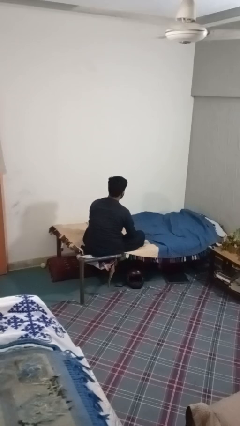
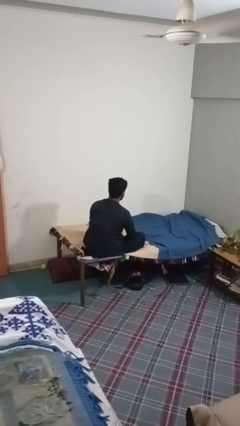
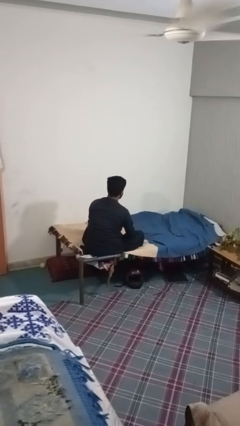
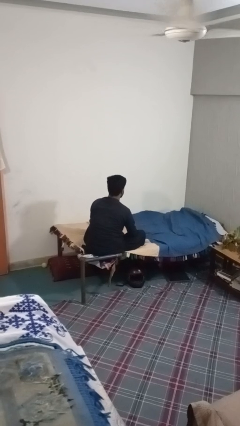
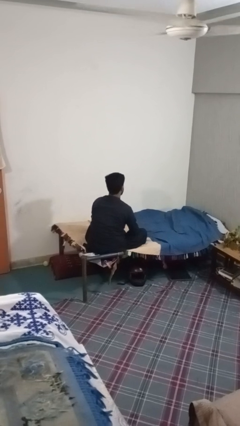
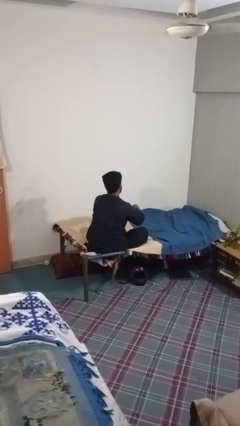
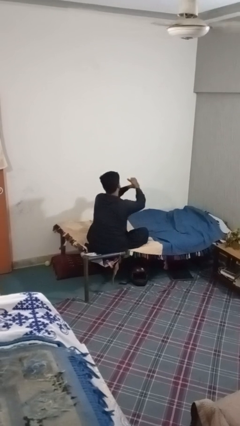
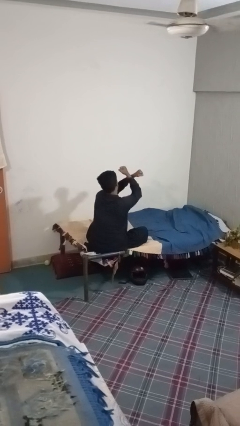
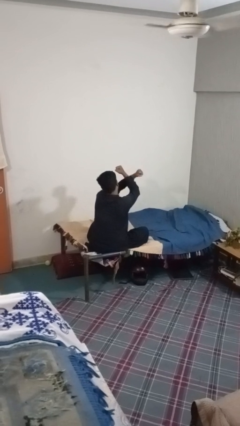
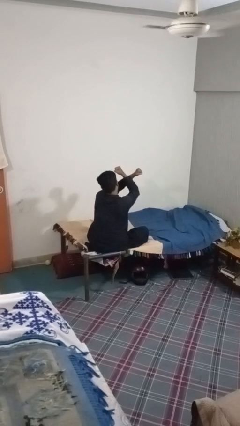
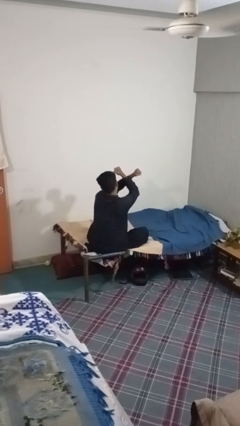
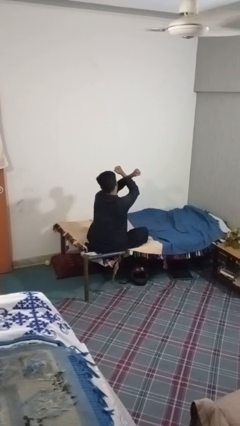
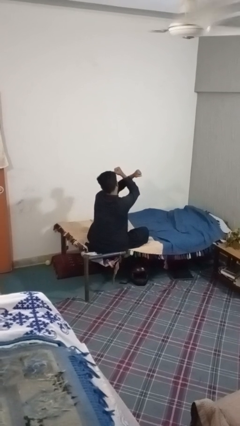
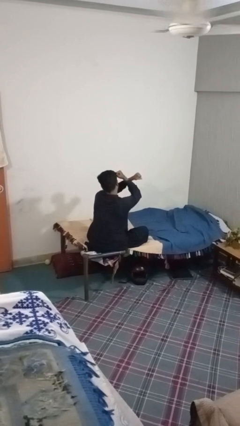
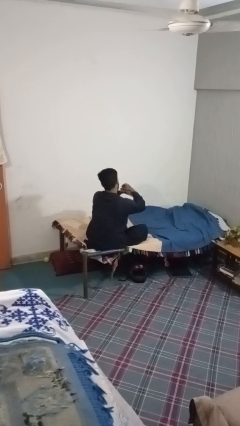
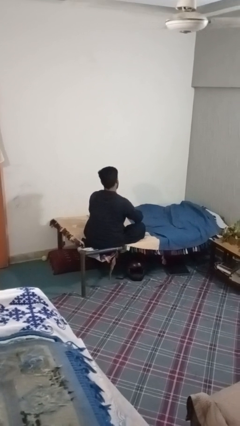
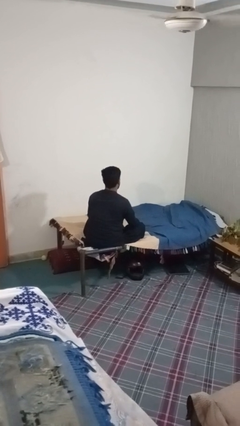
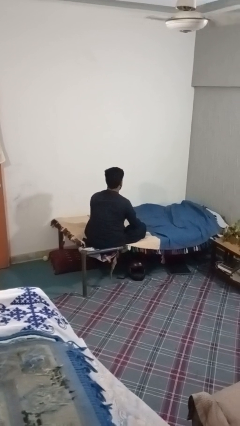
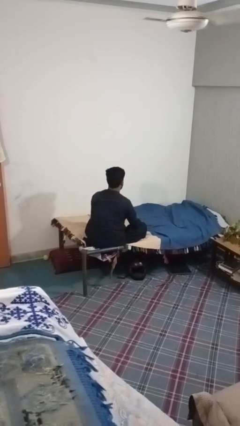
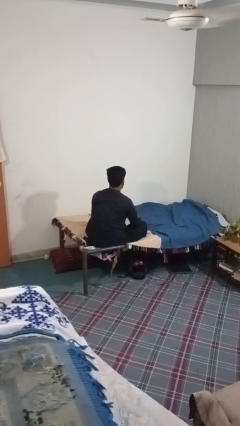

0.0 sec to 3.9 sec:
person gestures arms x

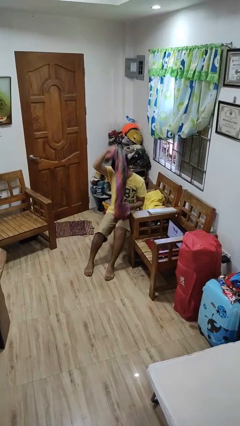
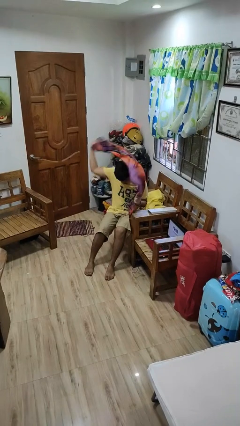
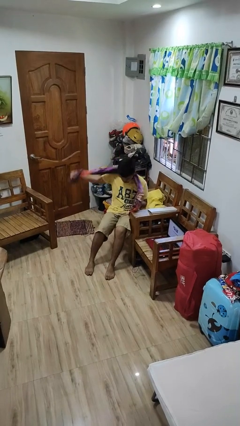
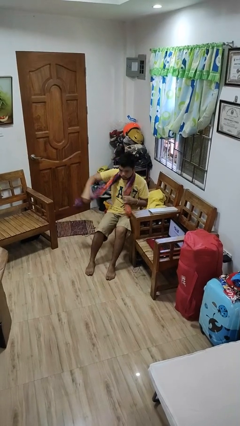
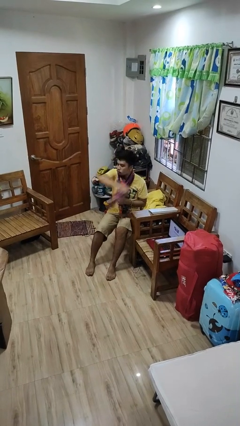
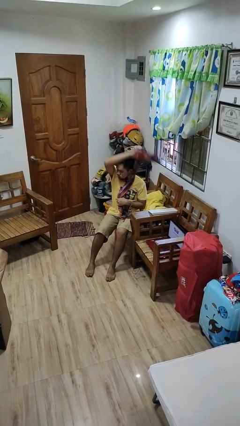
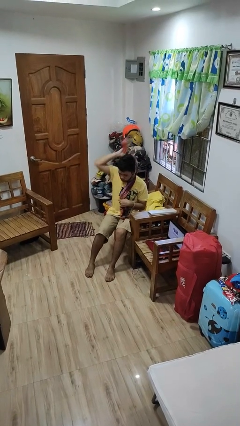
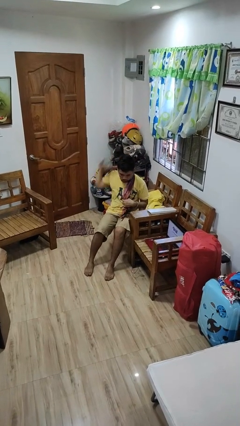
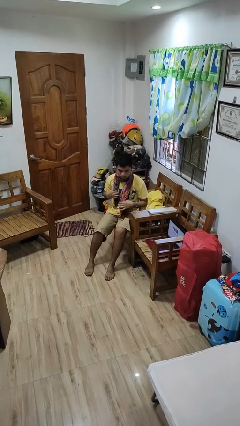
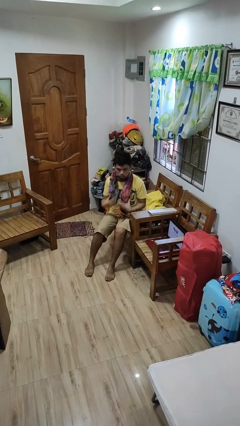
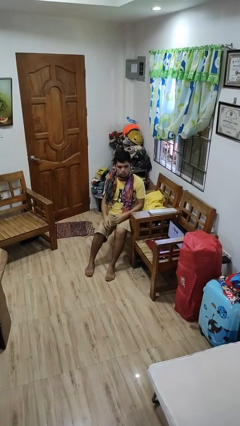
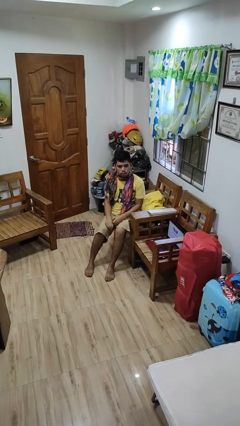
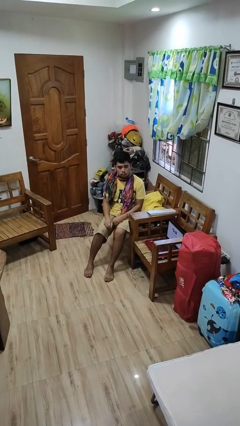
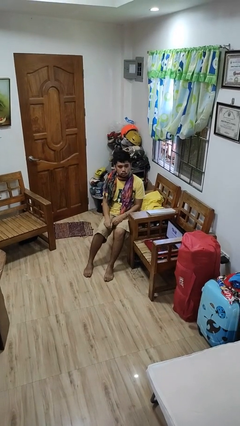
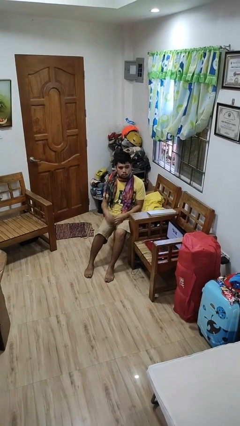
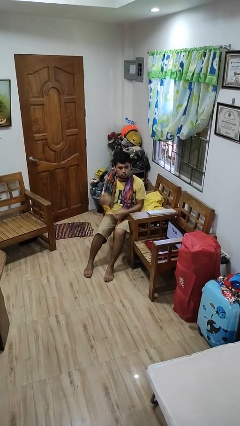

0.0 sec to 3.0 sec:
person puts on scarf

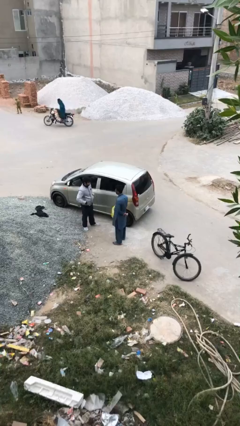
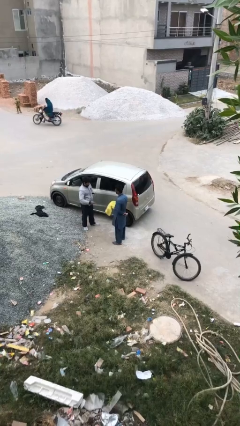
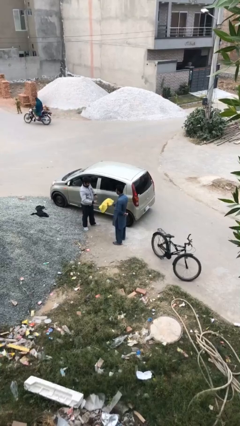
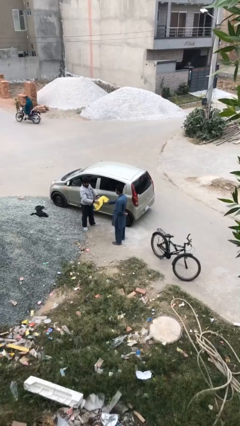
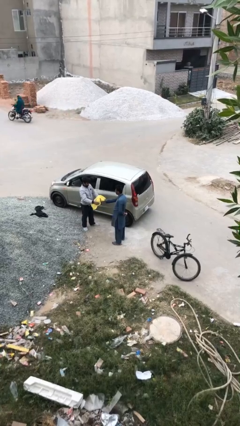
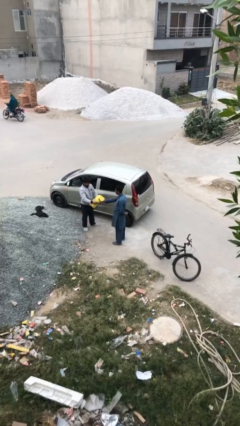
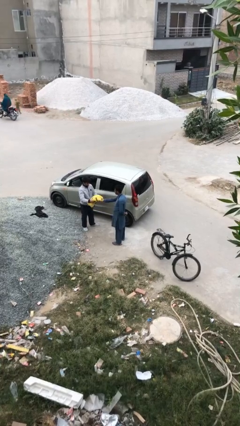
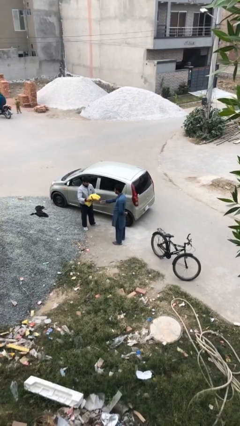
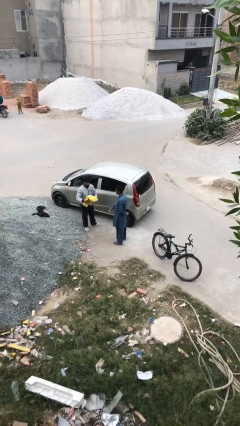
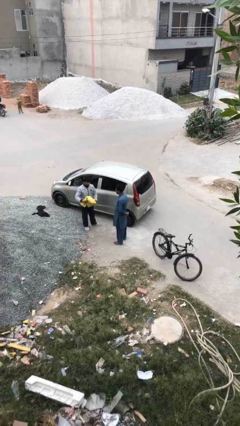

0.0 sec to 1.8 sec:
person transfers object to person

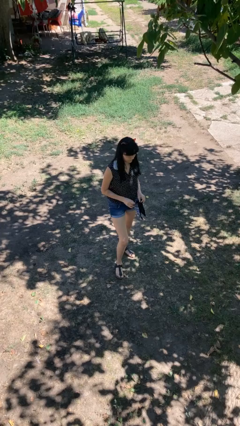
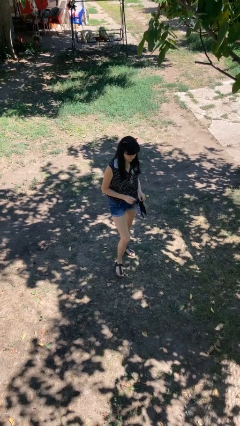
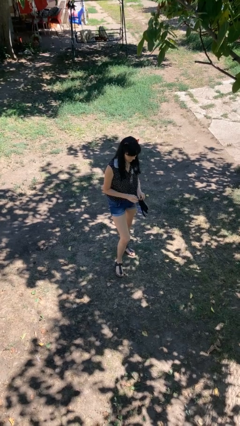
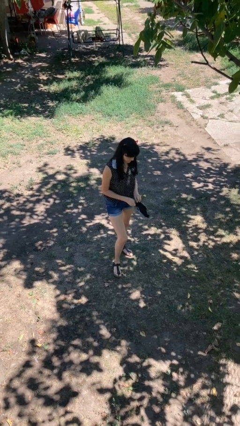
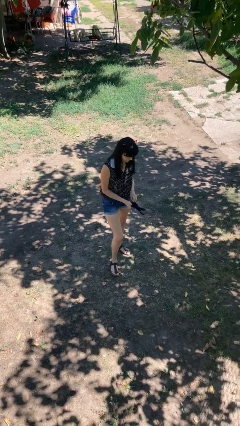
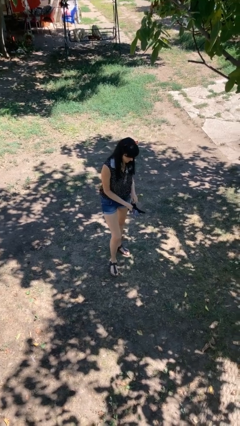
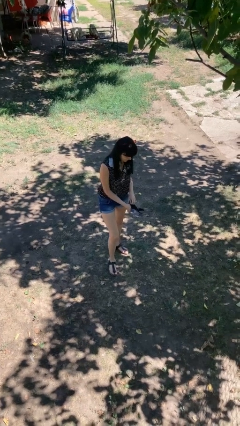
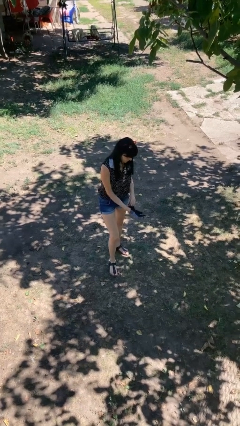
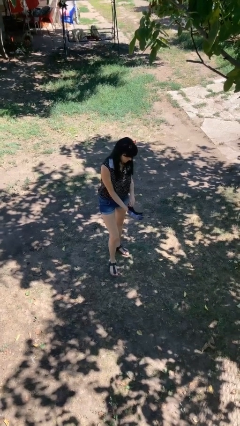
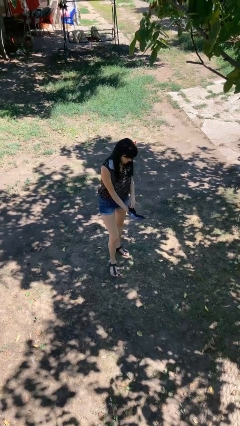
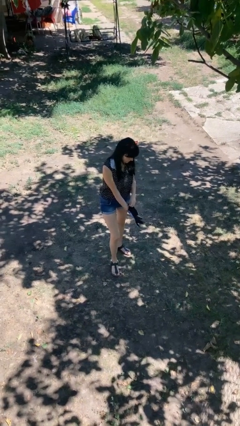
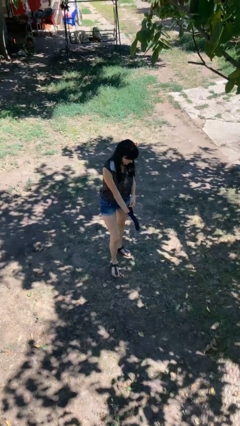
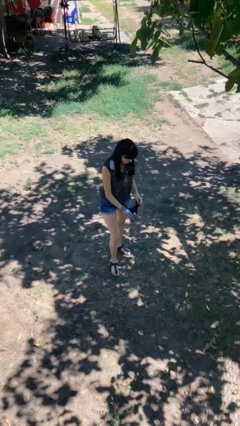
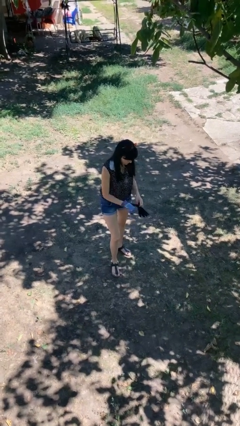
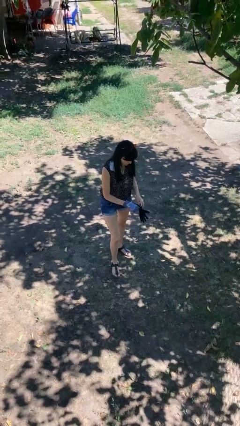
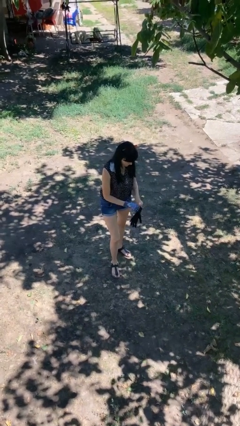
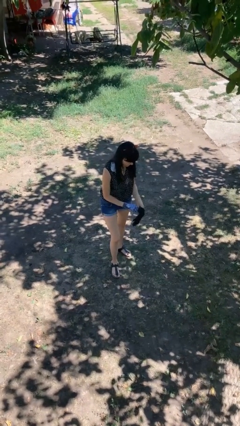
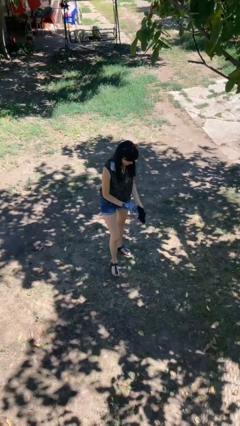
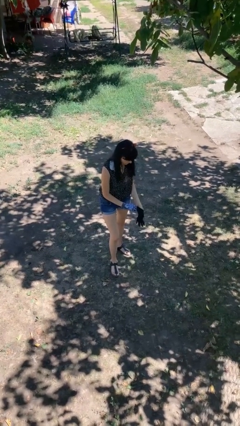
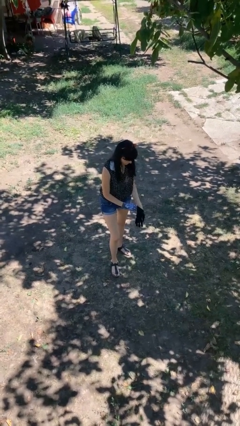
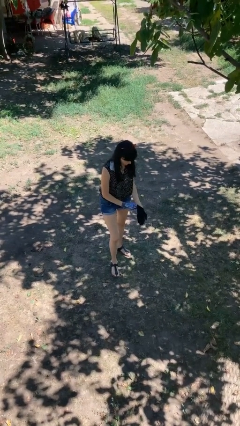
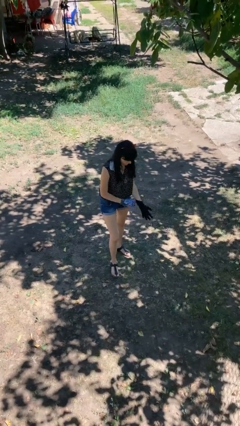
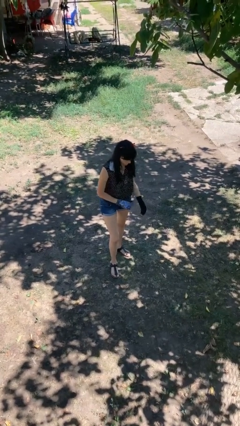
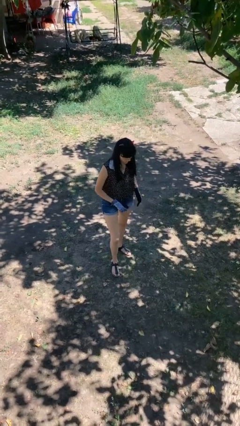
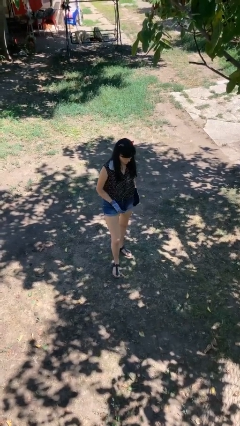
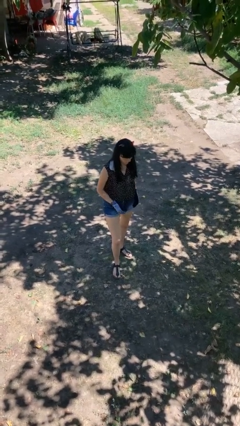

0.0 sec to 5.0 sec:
person puts on gloves

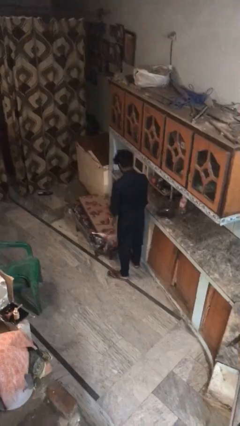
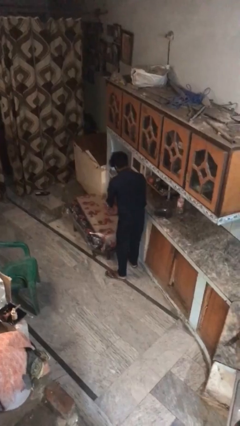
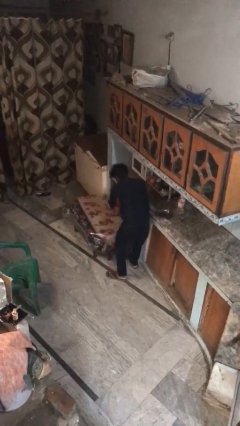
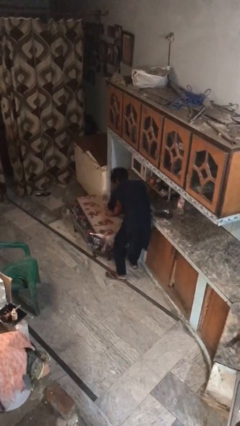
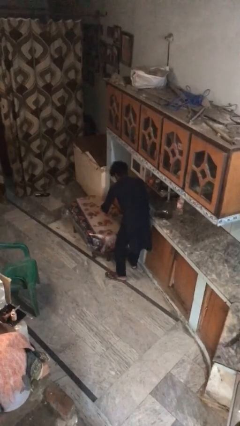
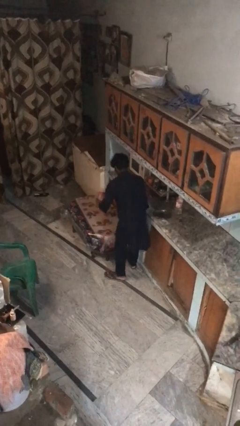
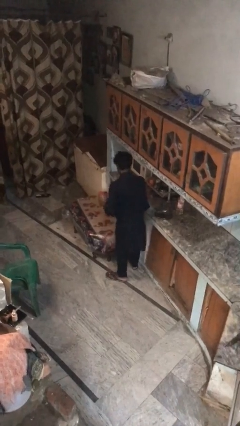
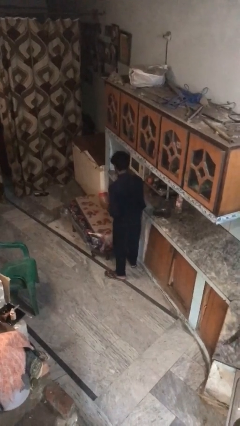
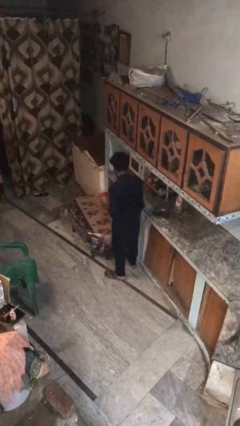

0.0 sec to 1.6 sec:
person picks up object from table

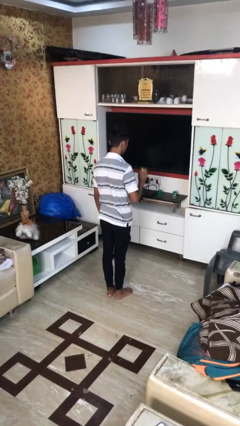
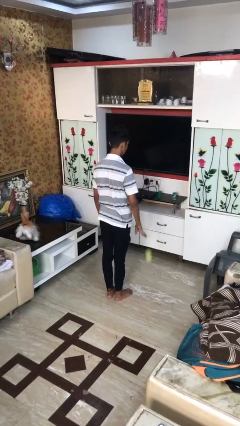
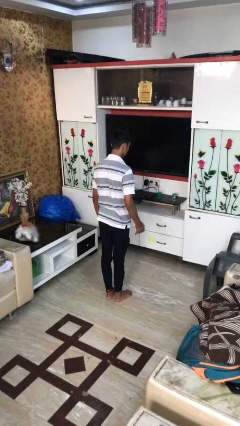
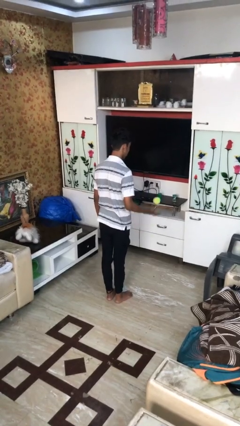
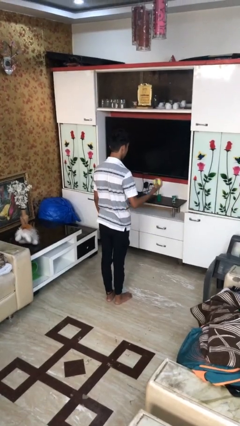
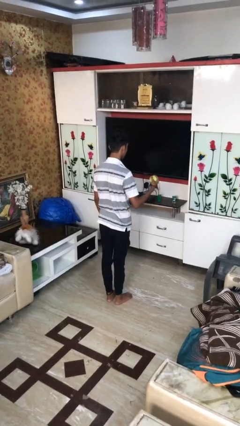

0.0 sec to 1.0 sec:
person bounces ball on floor

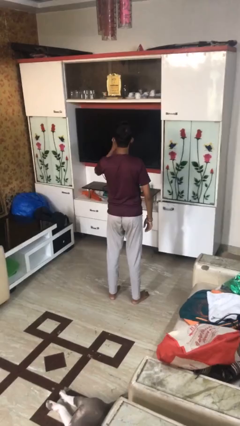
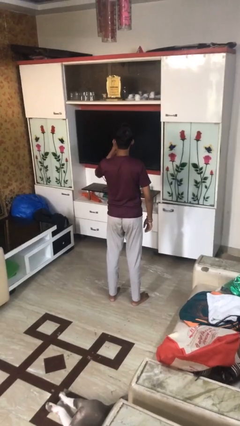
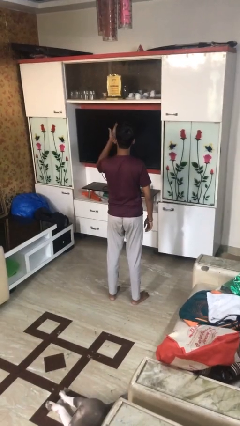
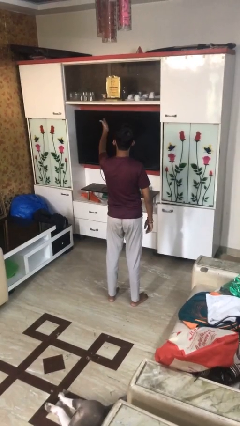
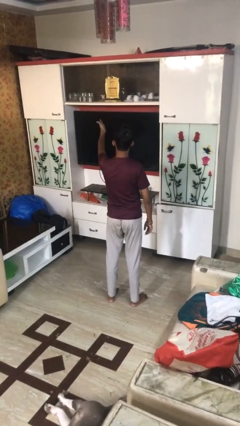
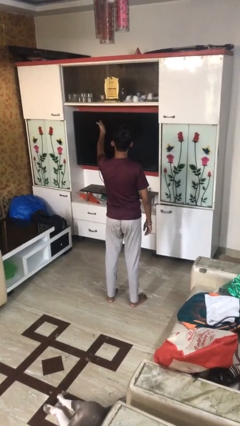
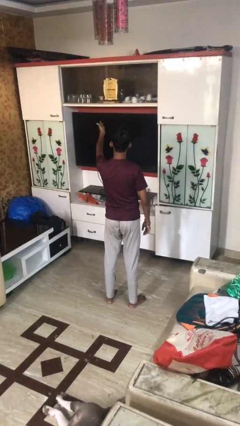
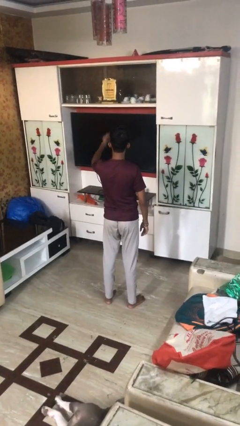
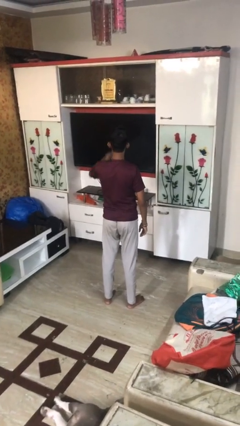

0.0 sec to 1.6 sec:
person gestures blow kiss
